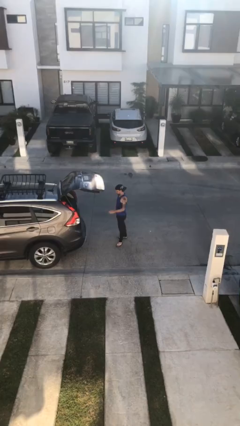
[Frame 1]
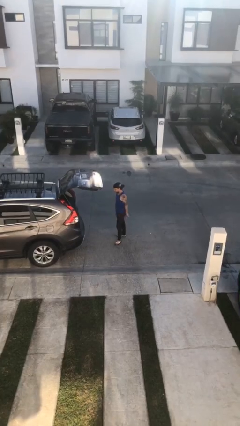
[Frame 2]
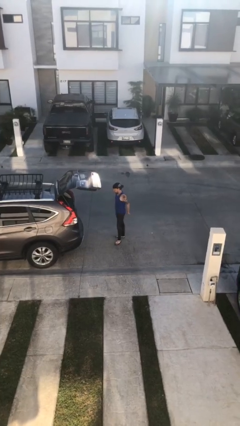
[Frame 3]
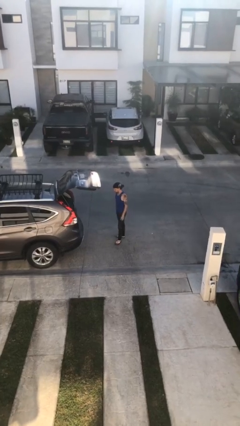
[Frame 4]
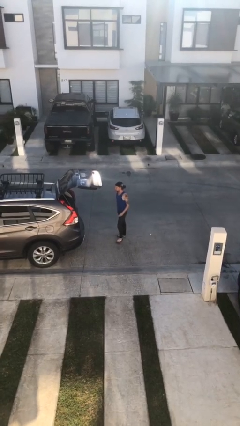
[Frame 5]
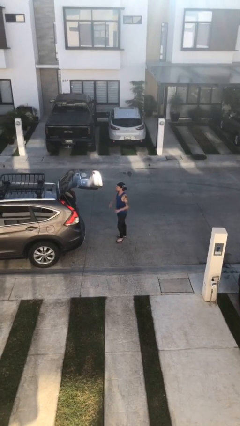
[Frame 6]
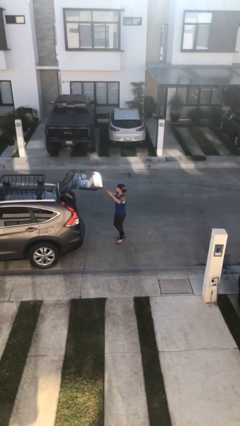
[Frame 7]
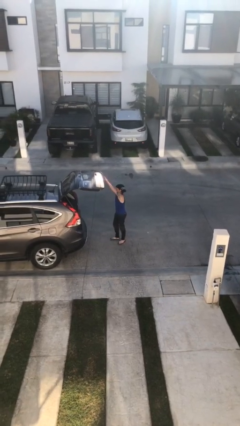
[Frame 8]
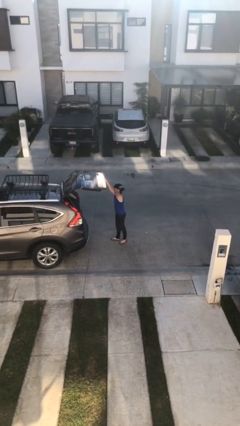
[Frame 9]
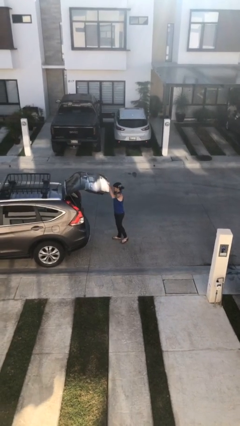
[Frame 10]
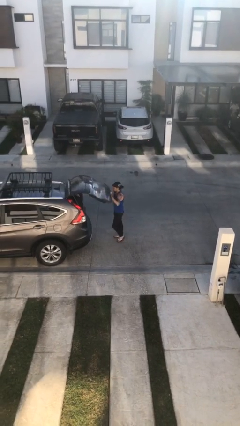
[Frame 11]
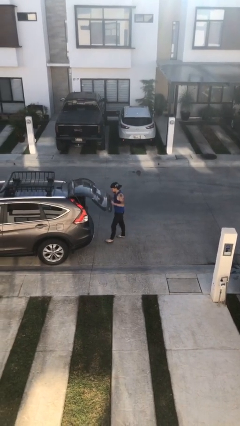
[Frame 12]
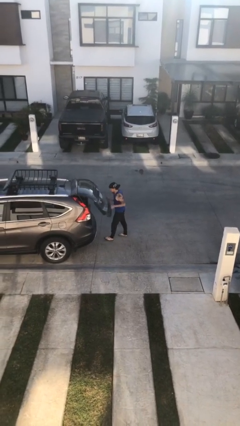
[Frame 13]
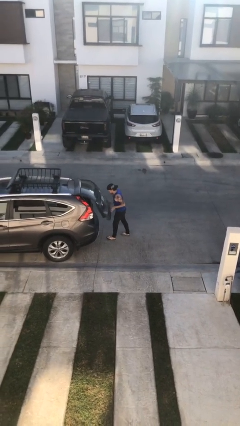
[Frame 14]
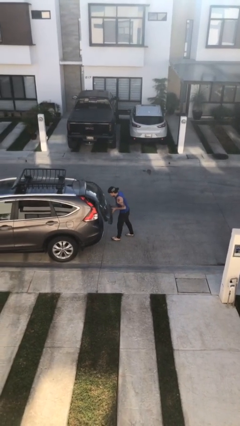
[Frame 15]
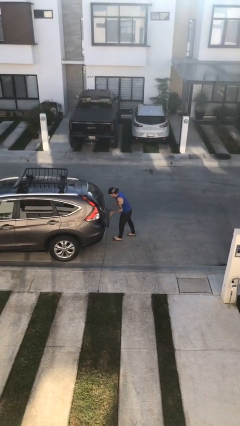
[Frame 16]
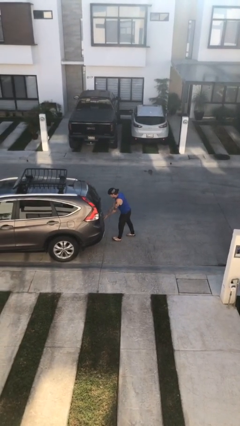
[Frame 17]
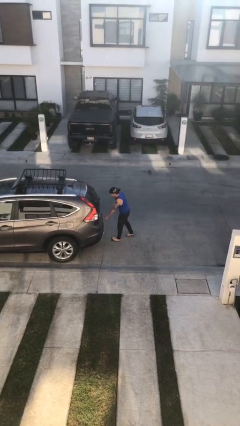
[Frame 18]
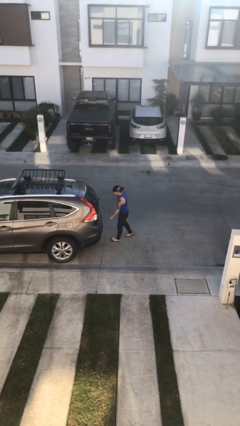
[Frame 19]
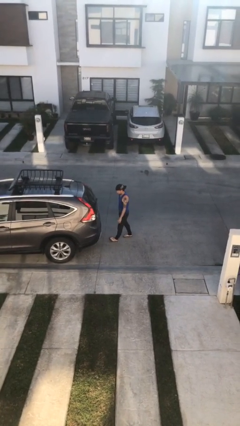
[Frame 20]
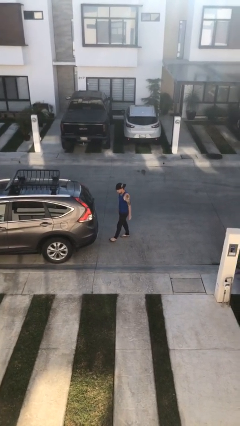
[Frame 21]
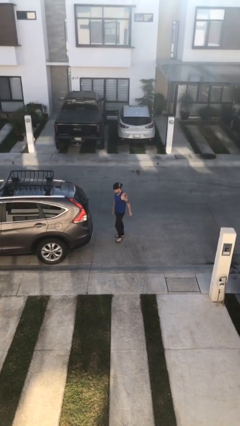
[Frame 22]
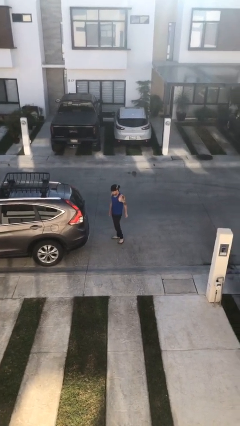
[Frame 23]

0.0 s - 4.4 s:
person closes car trunk

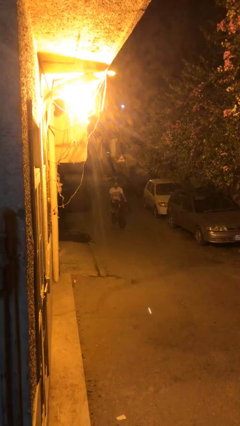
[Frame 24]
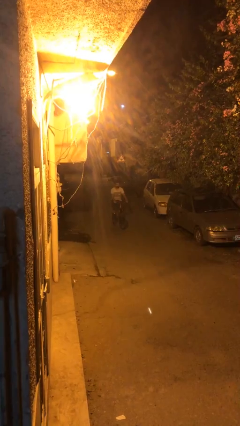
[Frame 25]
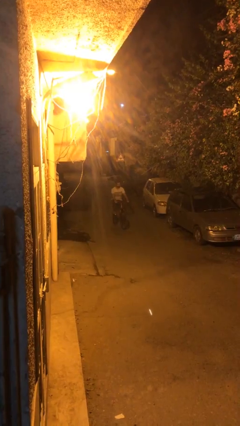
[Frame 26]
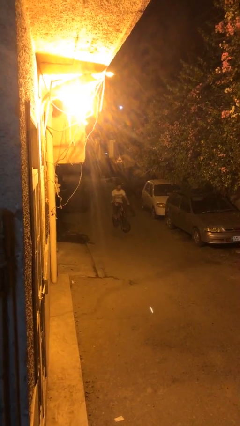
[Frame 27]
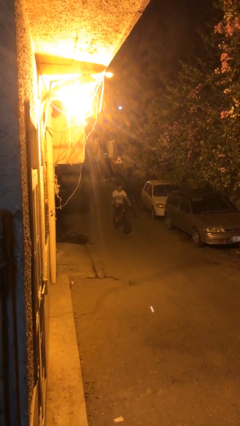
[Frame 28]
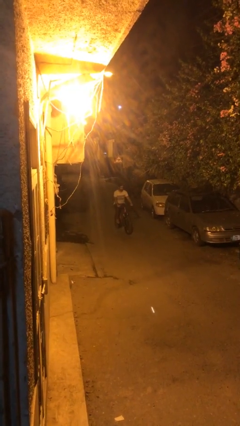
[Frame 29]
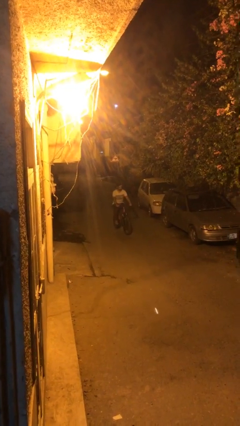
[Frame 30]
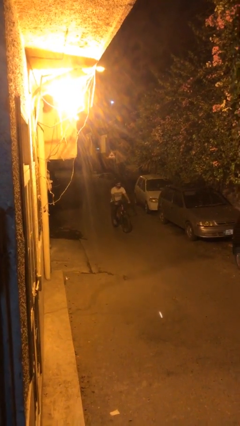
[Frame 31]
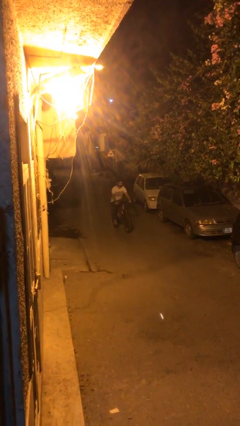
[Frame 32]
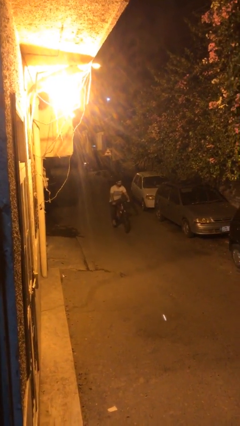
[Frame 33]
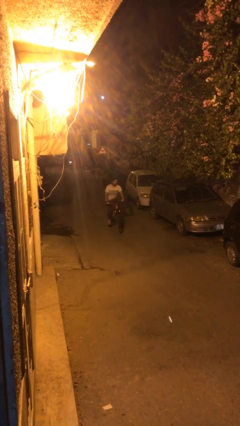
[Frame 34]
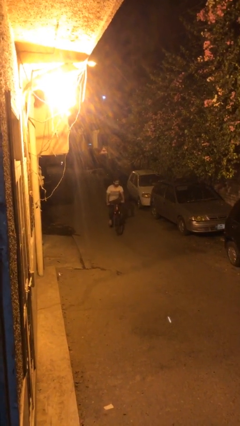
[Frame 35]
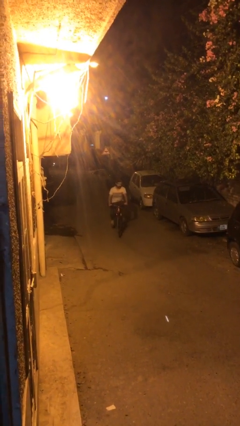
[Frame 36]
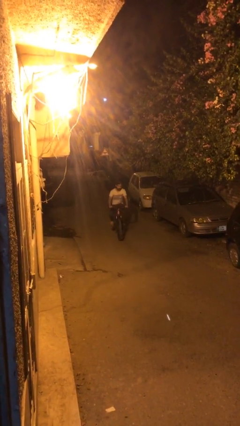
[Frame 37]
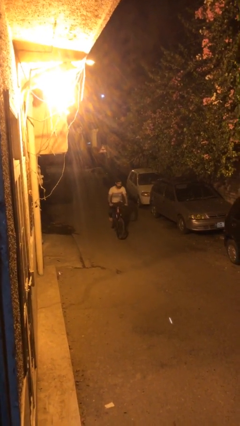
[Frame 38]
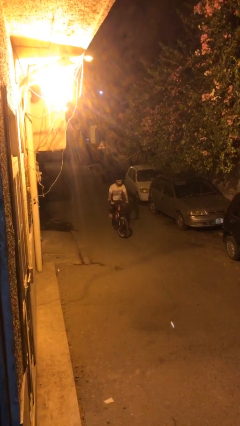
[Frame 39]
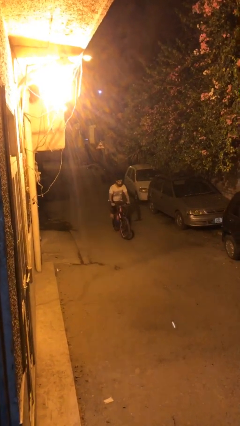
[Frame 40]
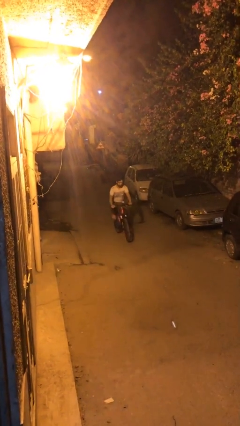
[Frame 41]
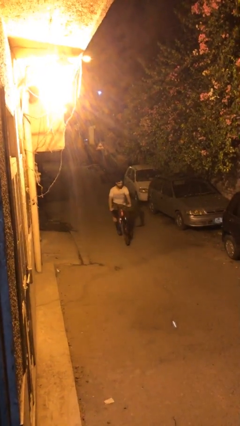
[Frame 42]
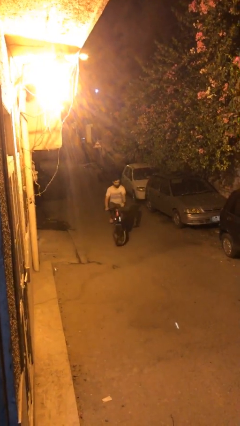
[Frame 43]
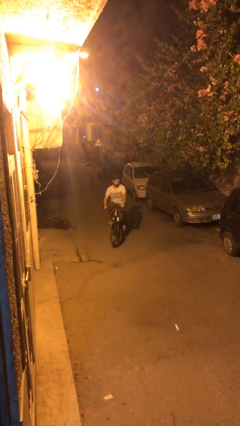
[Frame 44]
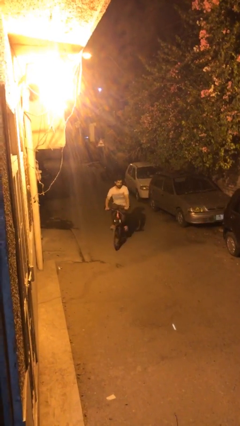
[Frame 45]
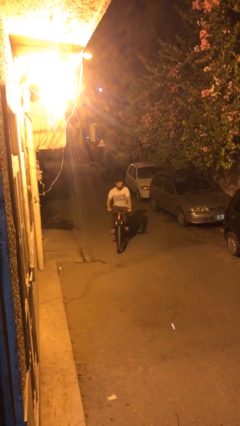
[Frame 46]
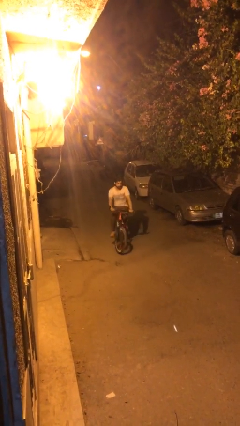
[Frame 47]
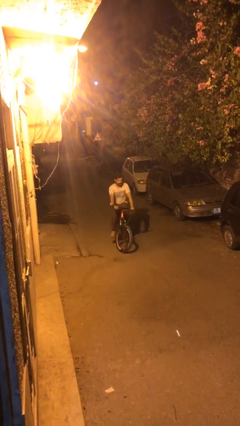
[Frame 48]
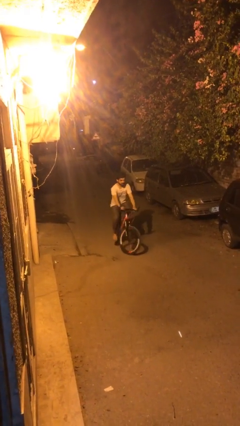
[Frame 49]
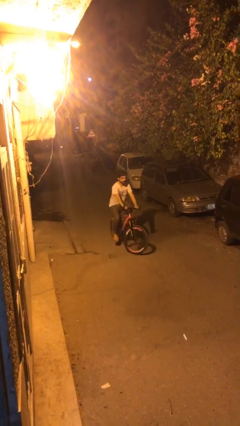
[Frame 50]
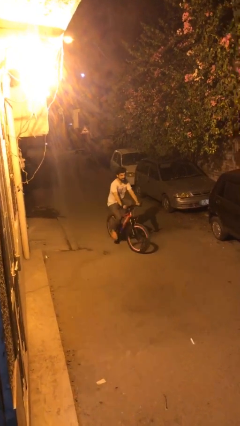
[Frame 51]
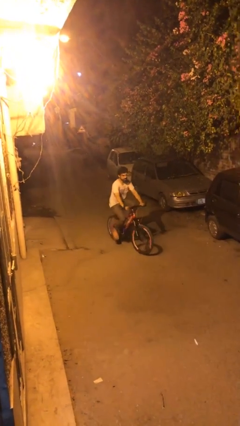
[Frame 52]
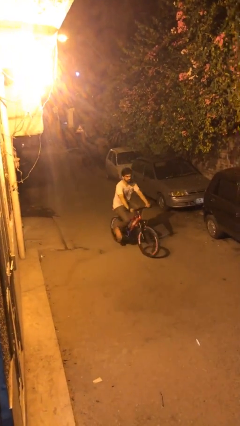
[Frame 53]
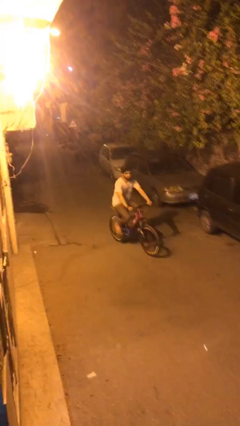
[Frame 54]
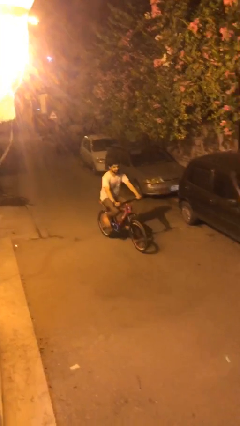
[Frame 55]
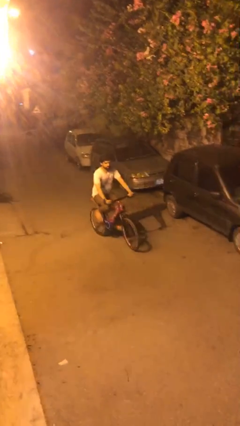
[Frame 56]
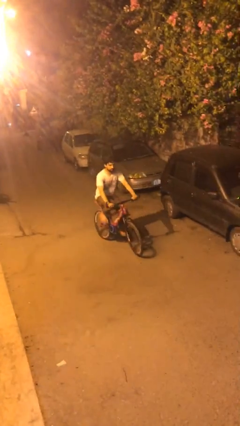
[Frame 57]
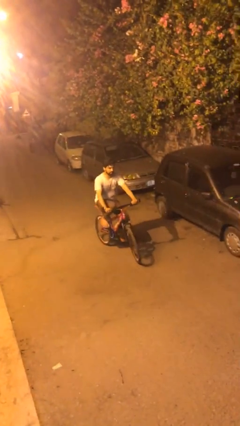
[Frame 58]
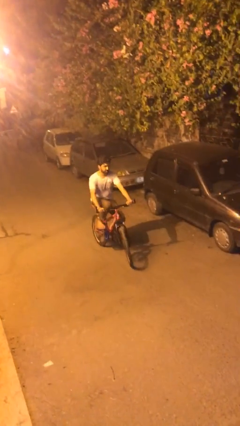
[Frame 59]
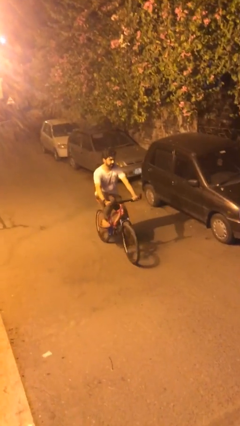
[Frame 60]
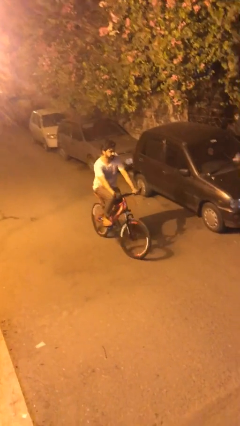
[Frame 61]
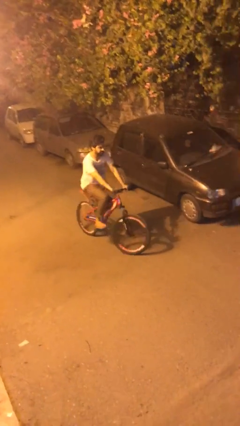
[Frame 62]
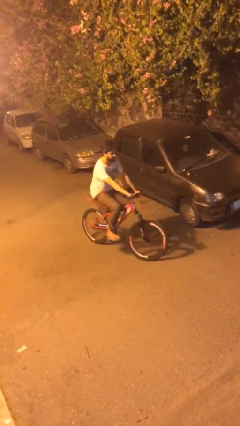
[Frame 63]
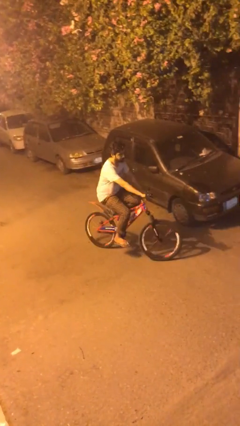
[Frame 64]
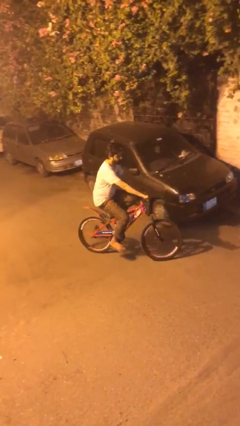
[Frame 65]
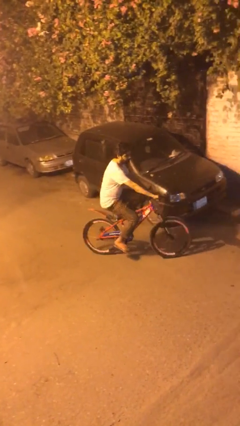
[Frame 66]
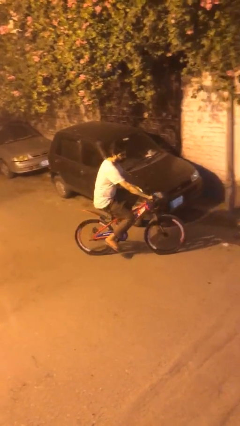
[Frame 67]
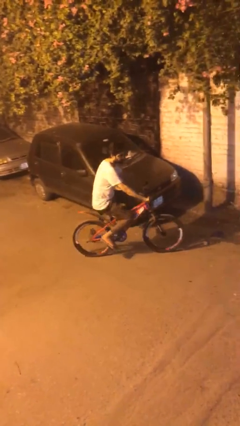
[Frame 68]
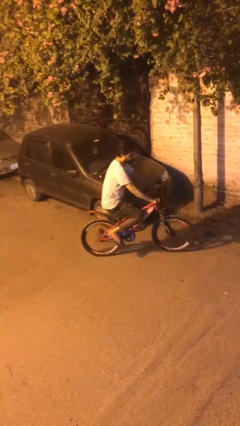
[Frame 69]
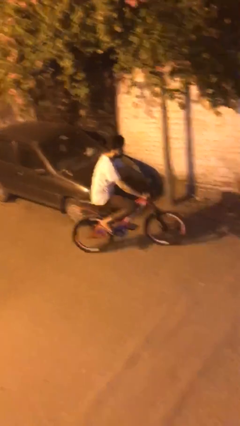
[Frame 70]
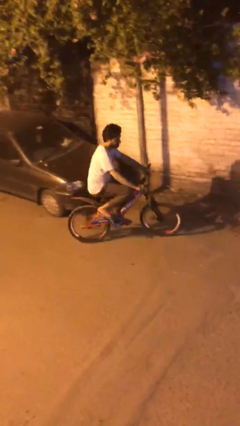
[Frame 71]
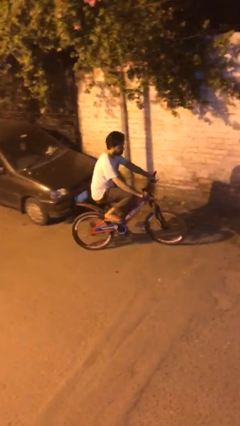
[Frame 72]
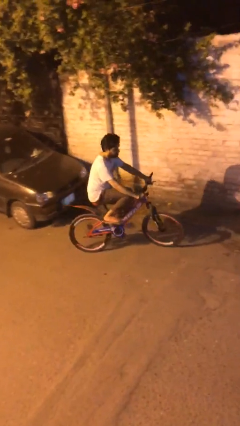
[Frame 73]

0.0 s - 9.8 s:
person rides bicycle

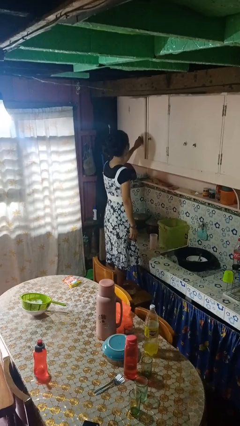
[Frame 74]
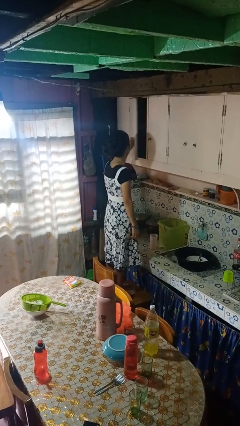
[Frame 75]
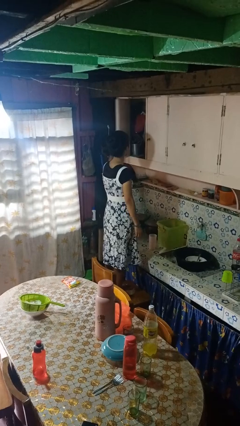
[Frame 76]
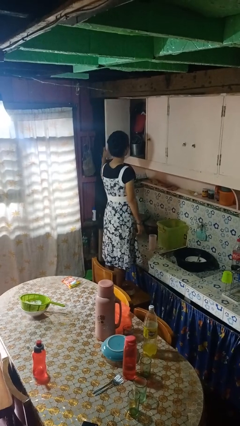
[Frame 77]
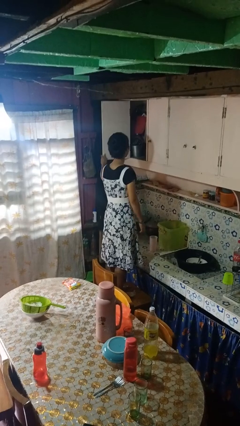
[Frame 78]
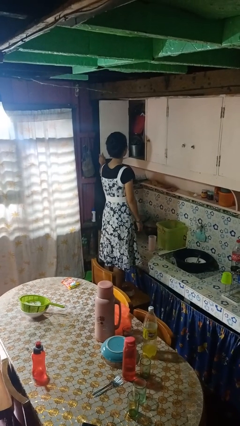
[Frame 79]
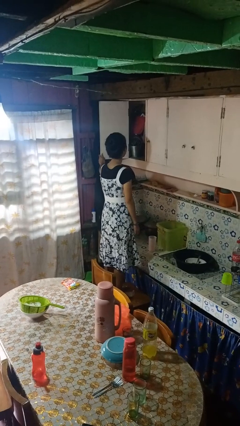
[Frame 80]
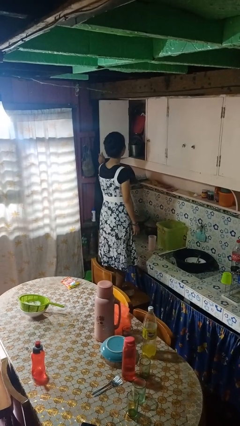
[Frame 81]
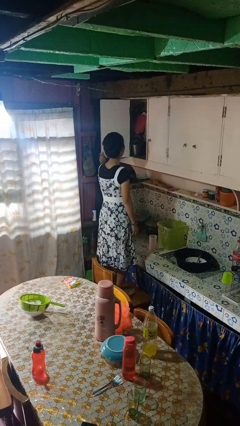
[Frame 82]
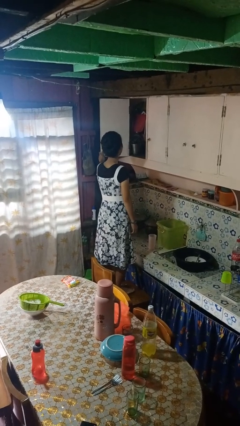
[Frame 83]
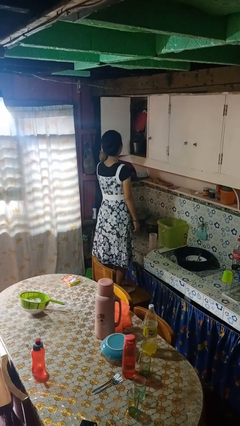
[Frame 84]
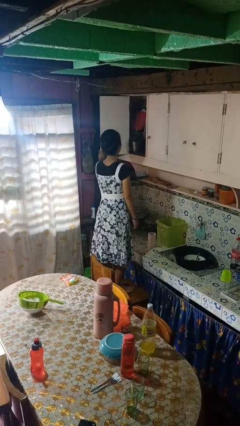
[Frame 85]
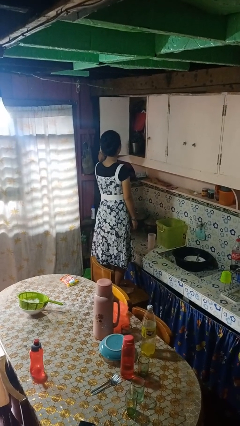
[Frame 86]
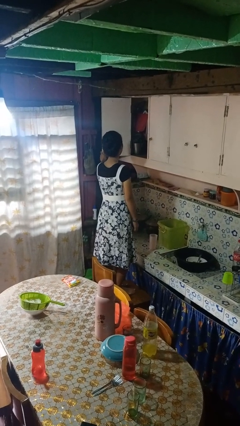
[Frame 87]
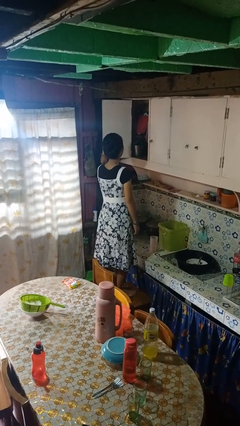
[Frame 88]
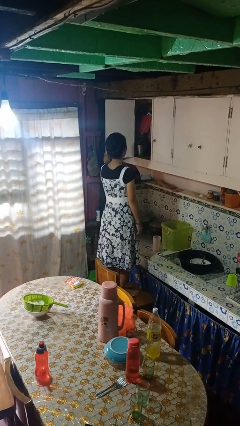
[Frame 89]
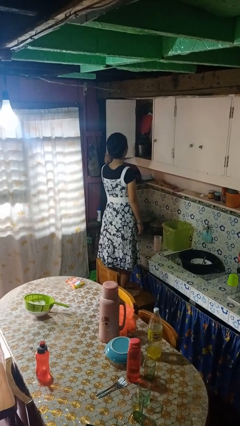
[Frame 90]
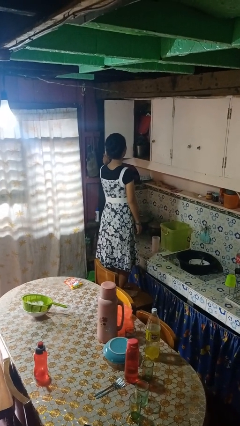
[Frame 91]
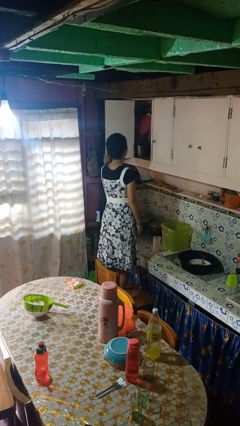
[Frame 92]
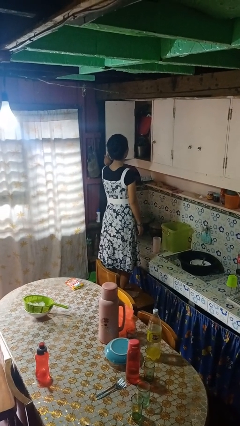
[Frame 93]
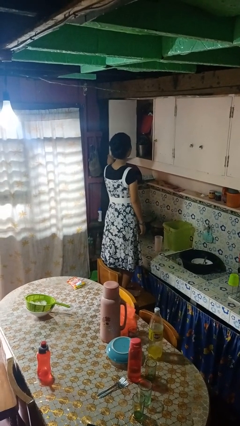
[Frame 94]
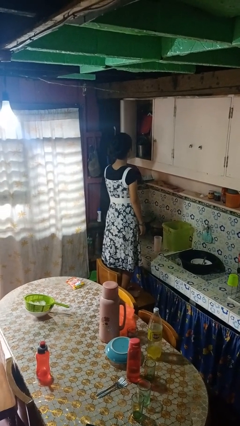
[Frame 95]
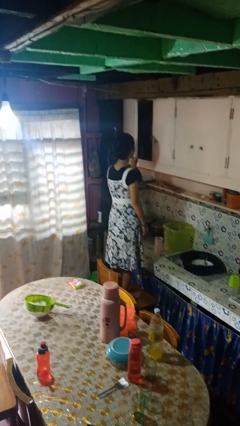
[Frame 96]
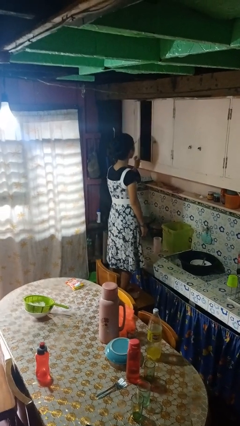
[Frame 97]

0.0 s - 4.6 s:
person opens cabinet
